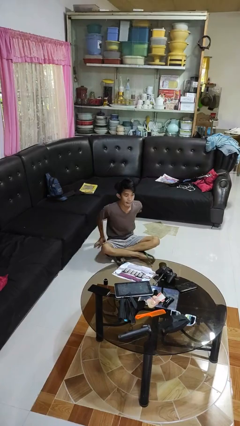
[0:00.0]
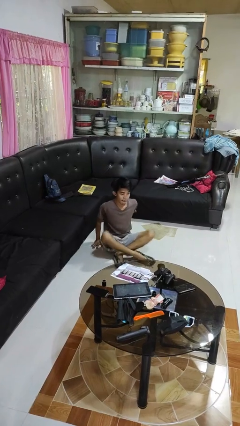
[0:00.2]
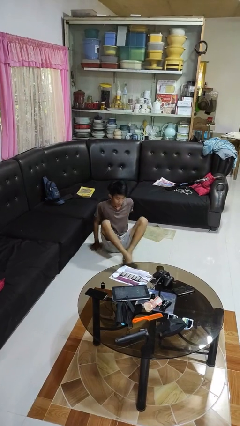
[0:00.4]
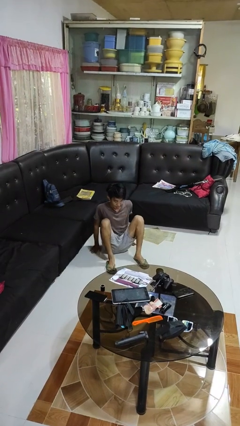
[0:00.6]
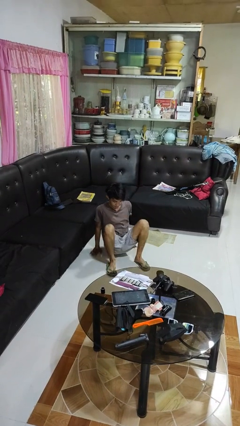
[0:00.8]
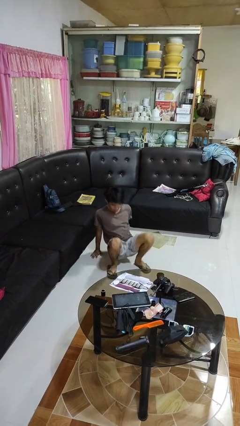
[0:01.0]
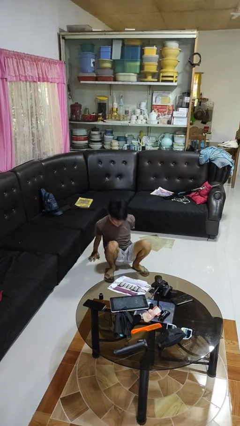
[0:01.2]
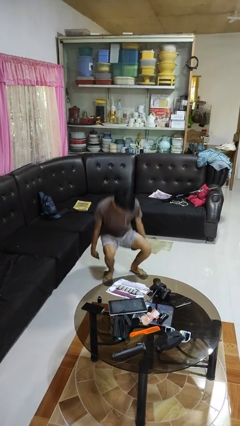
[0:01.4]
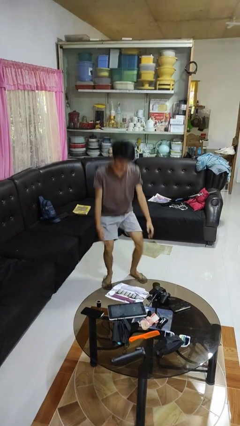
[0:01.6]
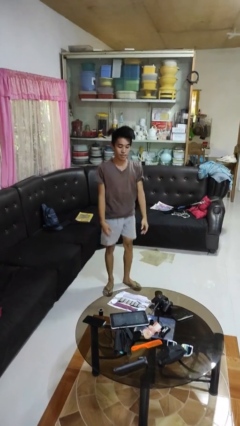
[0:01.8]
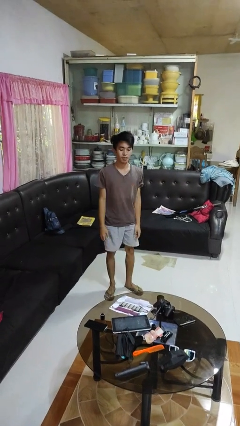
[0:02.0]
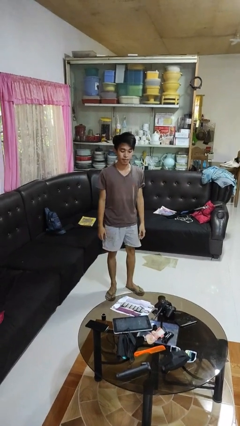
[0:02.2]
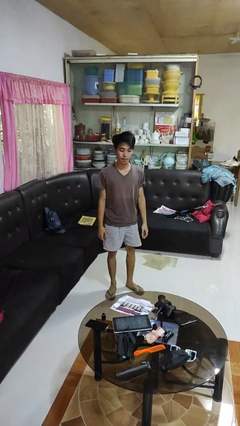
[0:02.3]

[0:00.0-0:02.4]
person stands up from floor

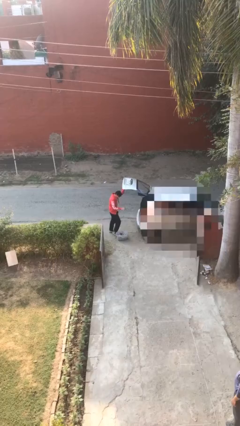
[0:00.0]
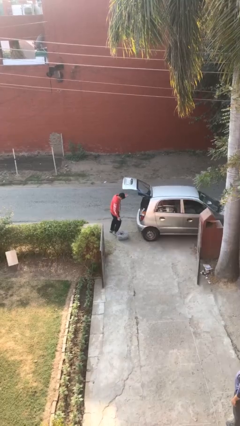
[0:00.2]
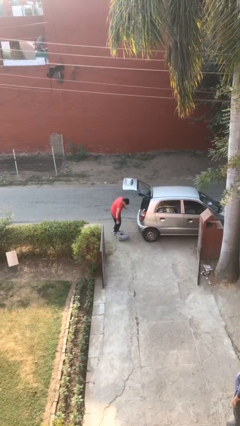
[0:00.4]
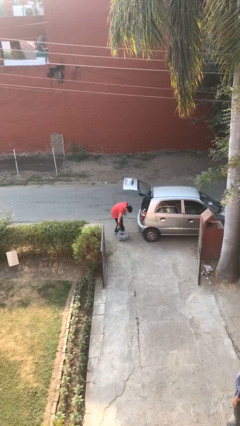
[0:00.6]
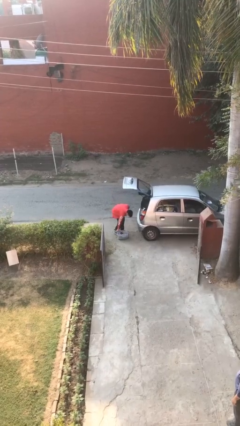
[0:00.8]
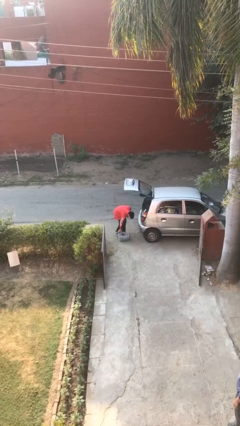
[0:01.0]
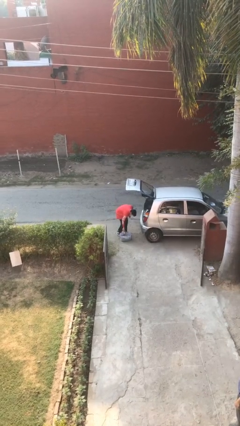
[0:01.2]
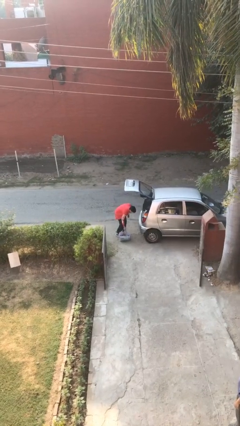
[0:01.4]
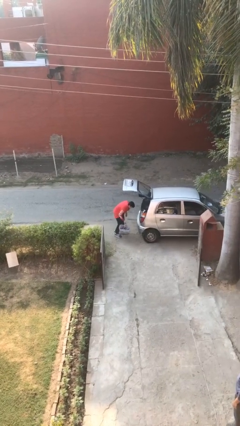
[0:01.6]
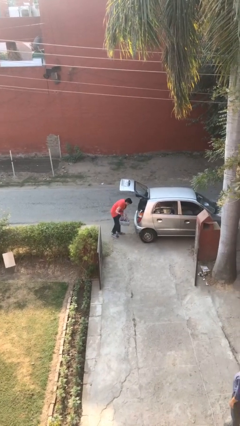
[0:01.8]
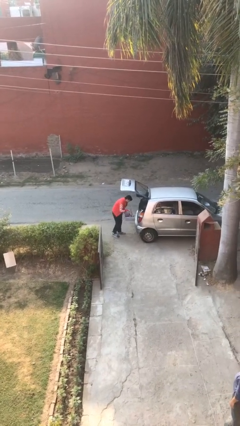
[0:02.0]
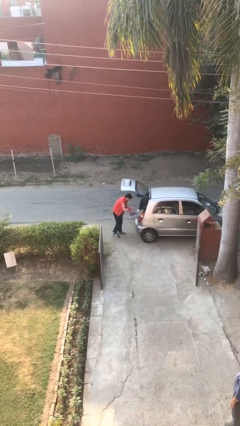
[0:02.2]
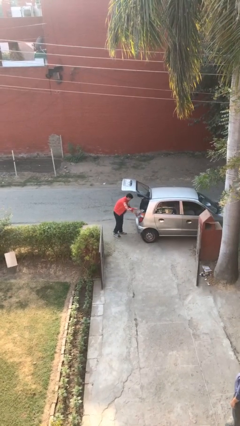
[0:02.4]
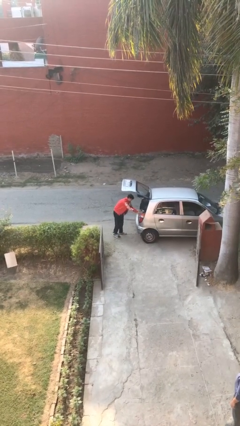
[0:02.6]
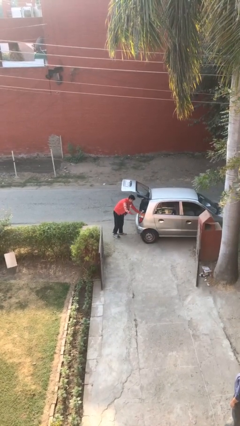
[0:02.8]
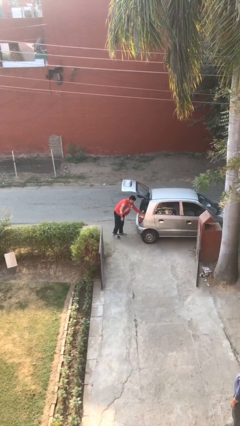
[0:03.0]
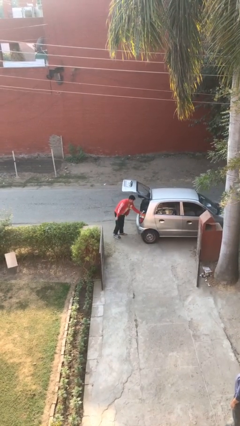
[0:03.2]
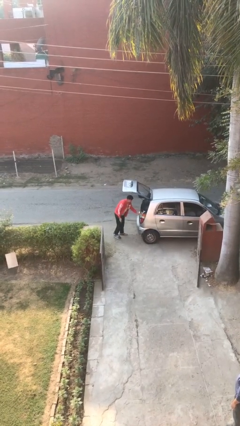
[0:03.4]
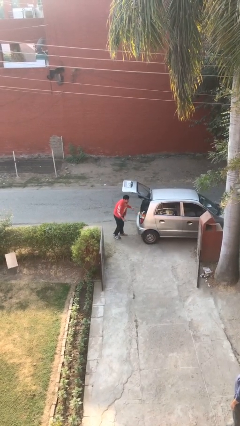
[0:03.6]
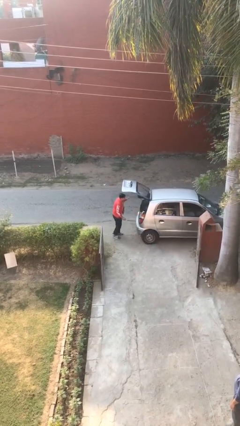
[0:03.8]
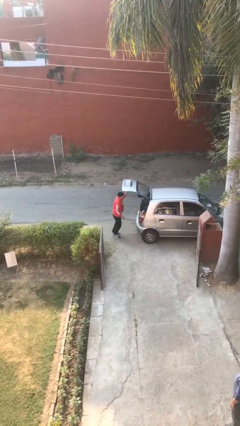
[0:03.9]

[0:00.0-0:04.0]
person loads car

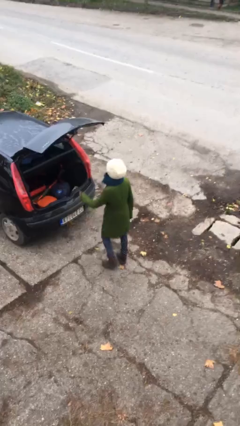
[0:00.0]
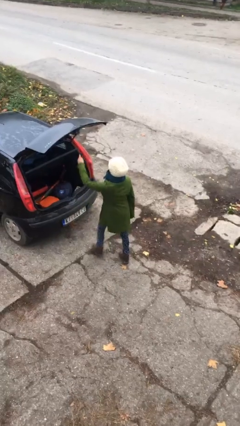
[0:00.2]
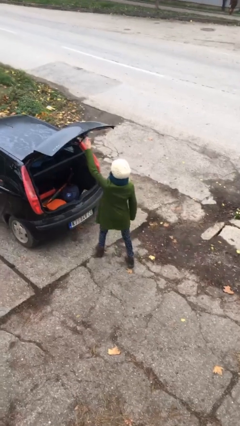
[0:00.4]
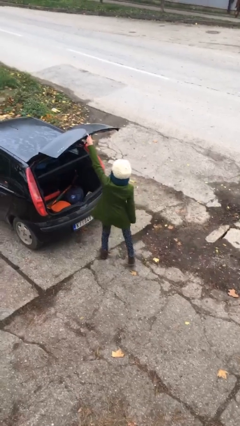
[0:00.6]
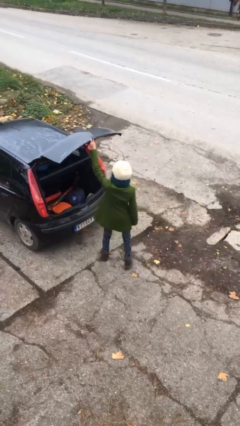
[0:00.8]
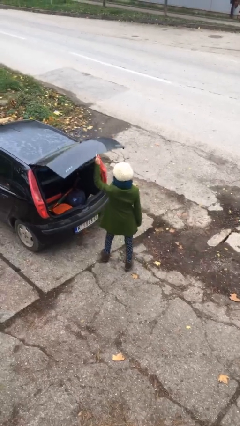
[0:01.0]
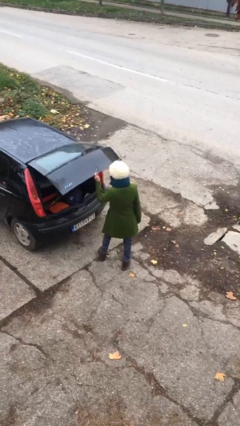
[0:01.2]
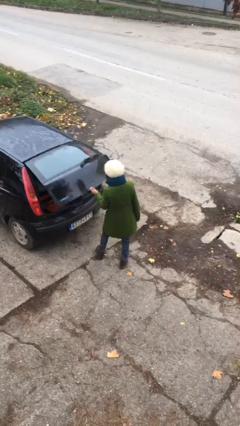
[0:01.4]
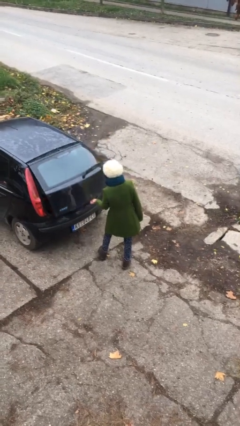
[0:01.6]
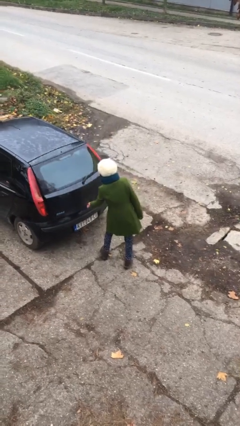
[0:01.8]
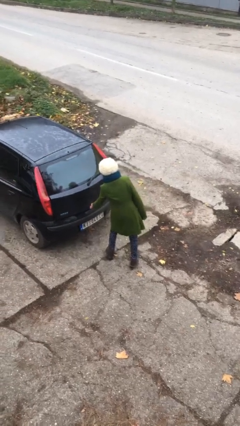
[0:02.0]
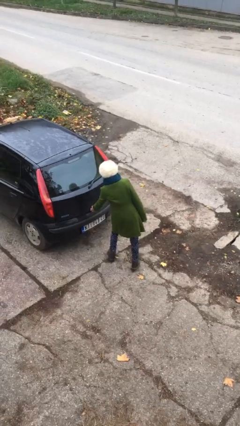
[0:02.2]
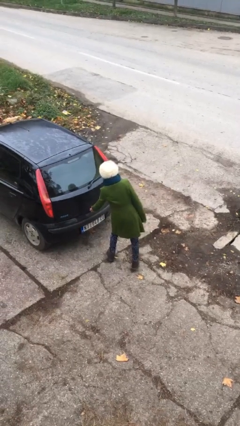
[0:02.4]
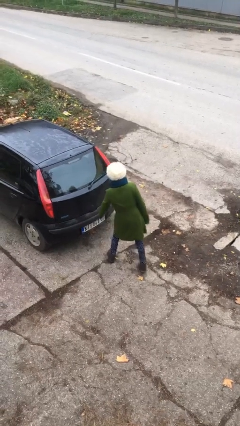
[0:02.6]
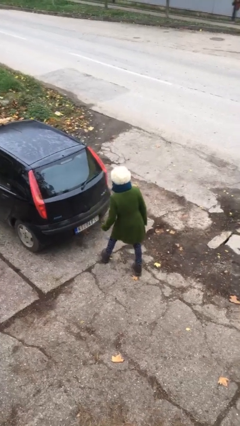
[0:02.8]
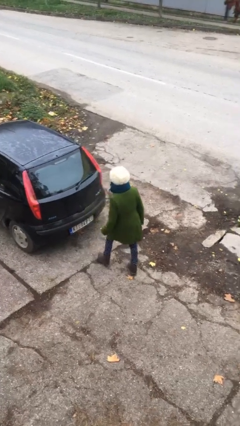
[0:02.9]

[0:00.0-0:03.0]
person closes car trunk

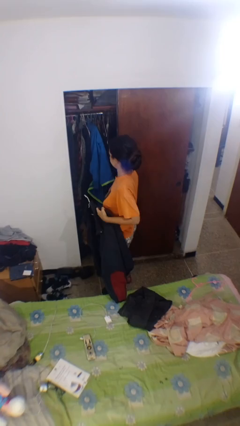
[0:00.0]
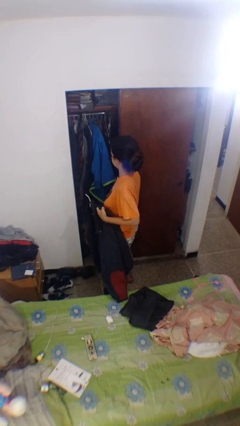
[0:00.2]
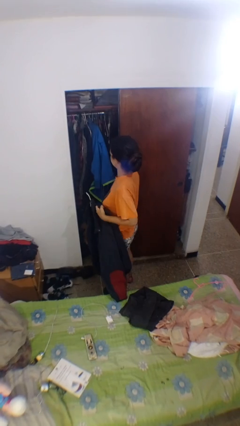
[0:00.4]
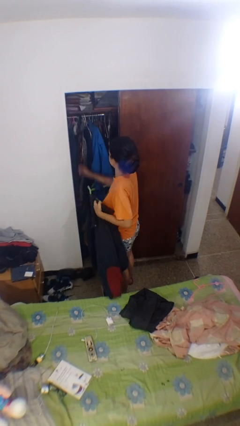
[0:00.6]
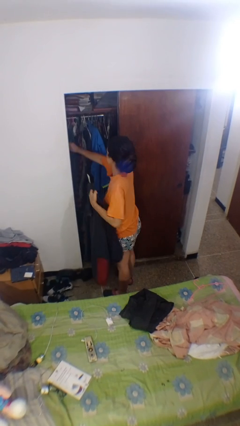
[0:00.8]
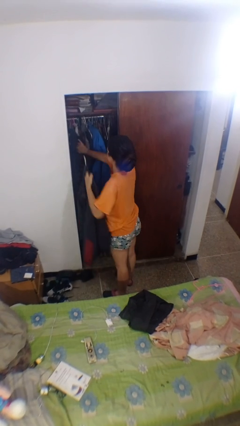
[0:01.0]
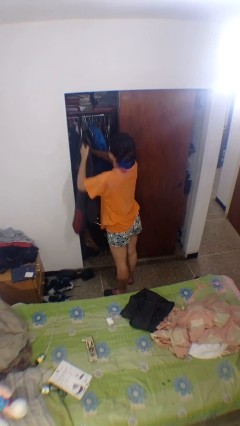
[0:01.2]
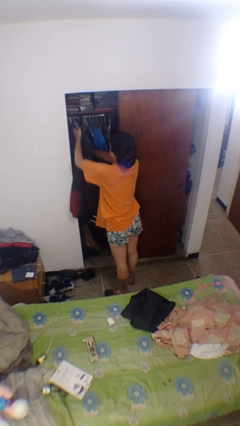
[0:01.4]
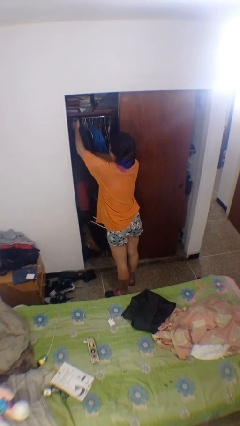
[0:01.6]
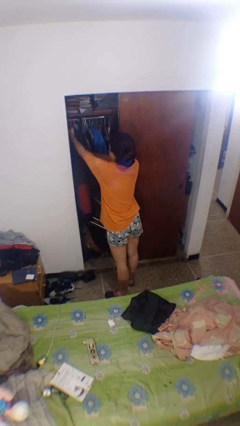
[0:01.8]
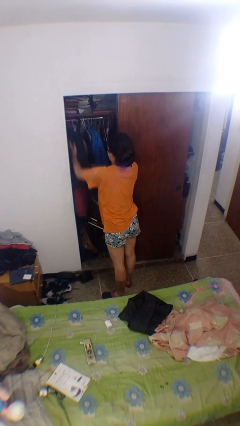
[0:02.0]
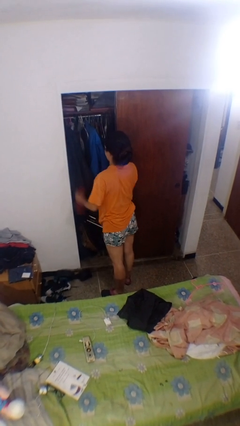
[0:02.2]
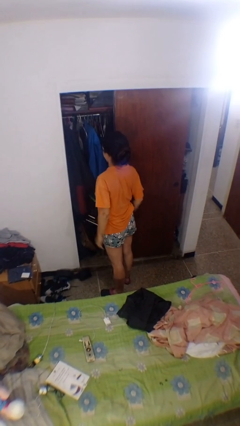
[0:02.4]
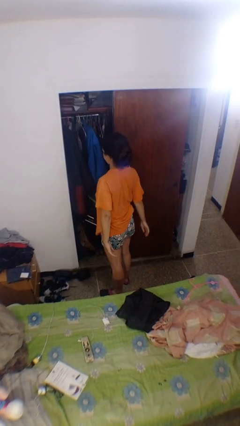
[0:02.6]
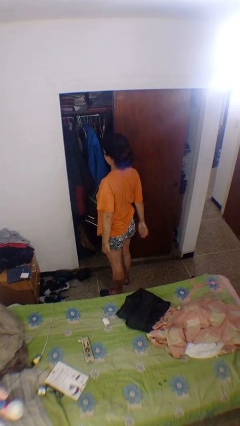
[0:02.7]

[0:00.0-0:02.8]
person puts clothes into closet

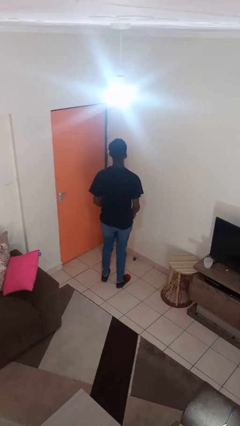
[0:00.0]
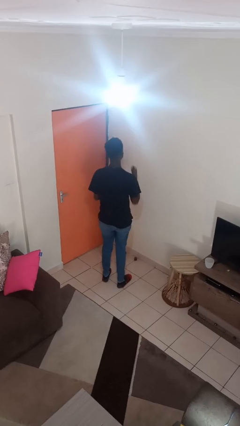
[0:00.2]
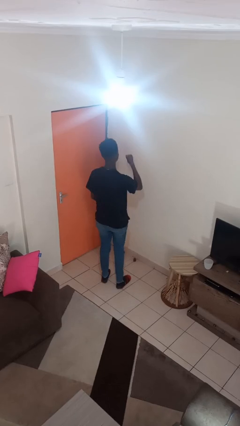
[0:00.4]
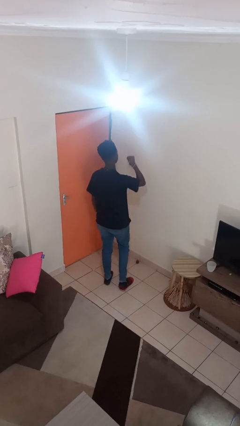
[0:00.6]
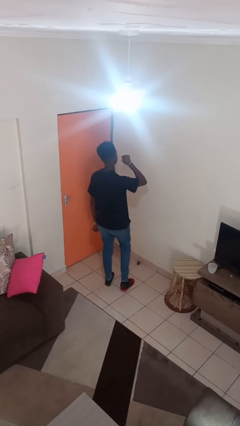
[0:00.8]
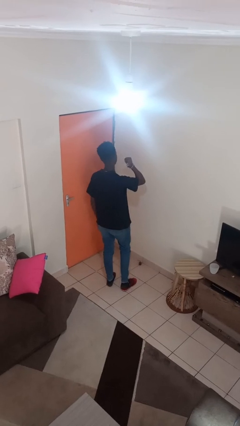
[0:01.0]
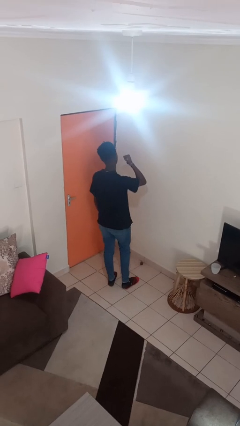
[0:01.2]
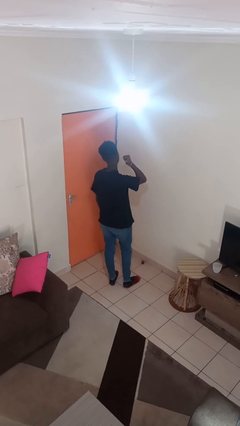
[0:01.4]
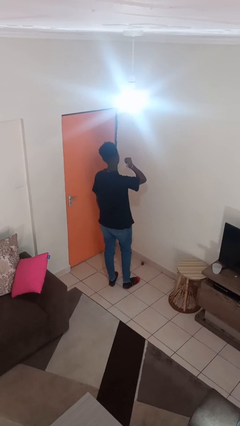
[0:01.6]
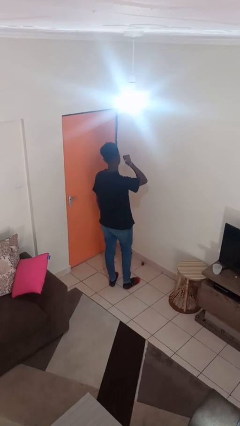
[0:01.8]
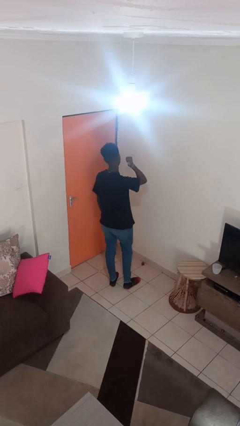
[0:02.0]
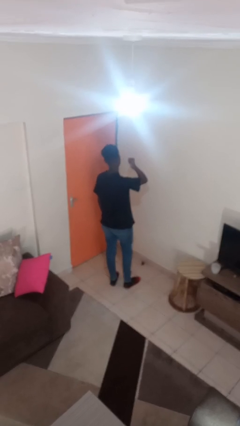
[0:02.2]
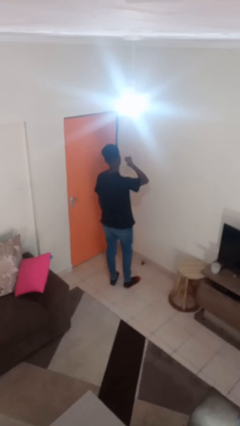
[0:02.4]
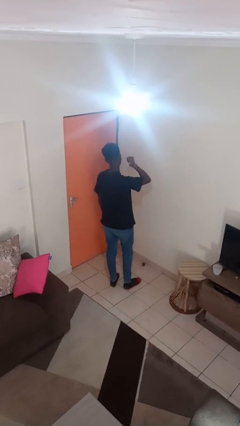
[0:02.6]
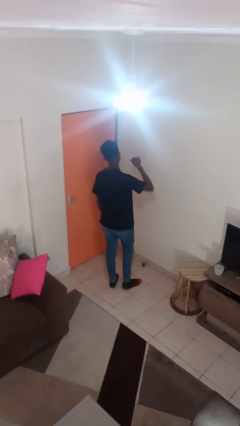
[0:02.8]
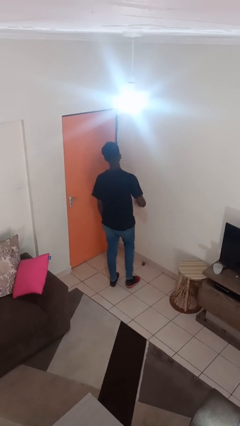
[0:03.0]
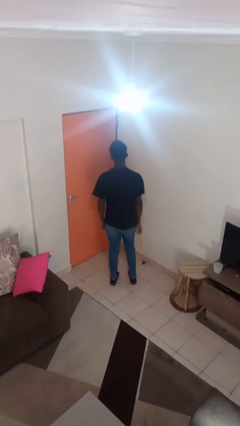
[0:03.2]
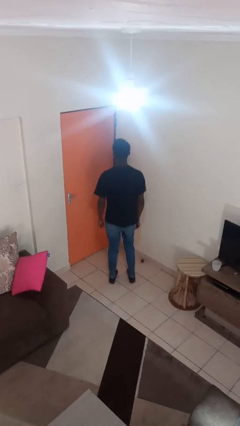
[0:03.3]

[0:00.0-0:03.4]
person gestures behind me

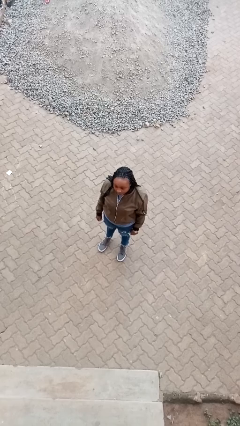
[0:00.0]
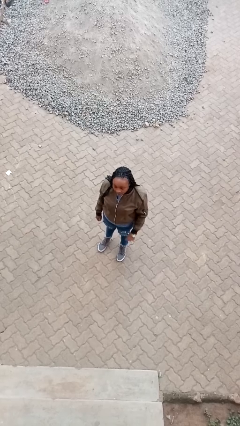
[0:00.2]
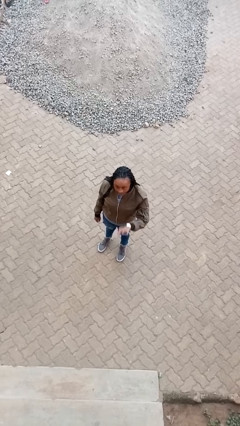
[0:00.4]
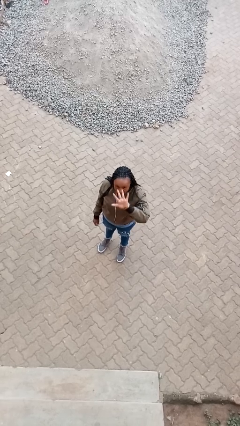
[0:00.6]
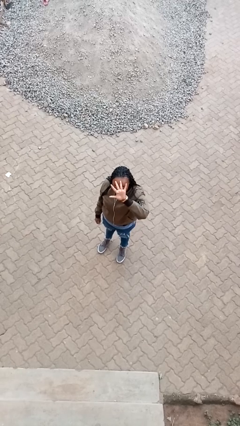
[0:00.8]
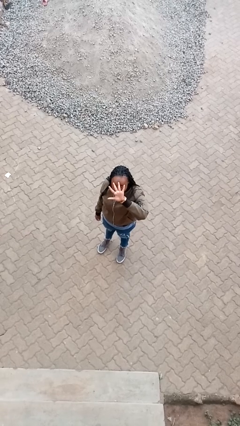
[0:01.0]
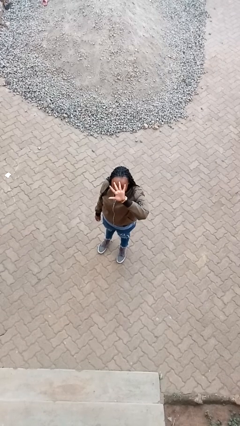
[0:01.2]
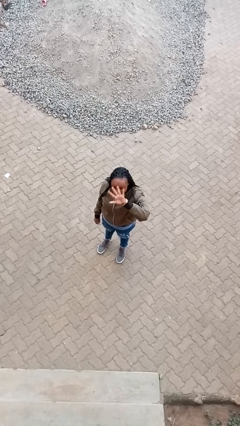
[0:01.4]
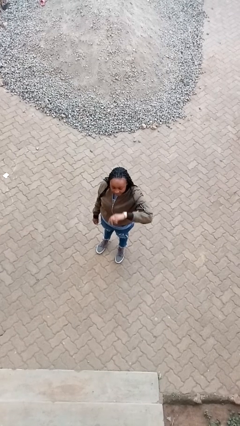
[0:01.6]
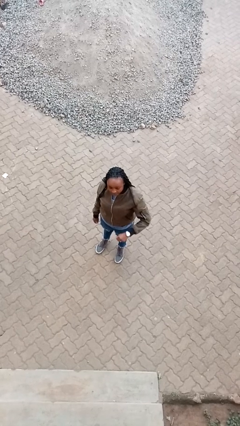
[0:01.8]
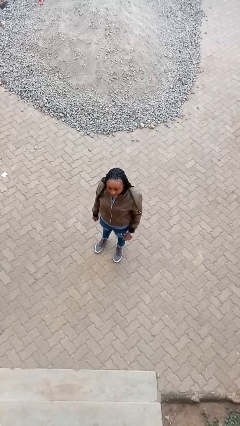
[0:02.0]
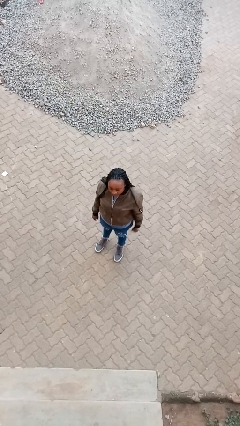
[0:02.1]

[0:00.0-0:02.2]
person gestures number five
